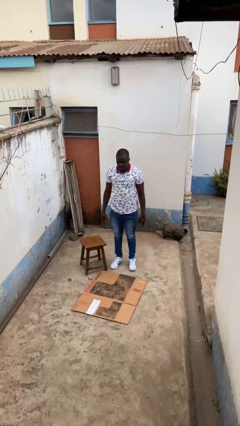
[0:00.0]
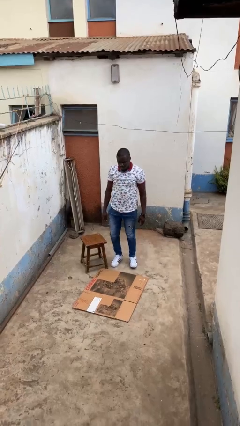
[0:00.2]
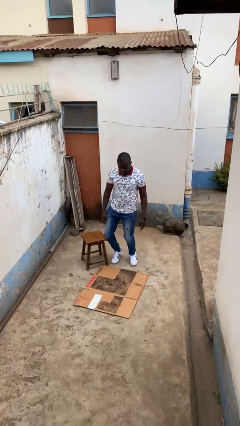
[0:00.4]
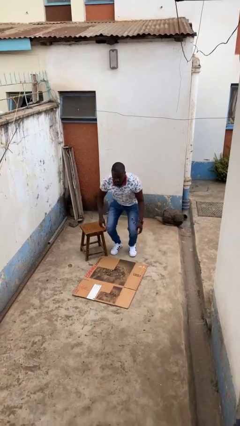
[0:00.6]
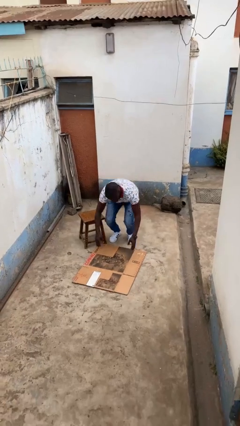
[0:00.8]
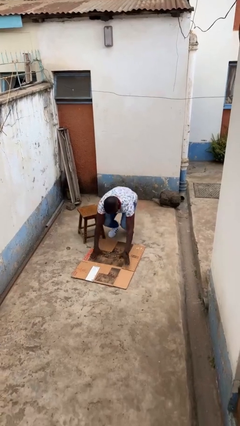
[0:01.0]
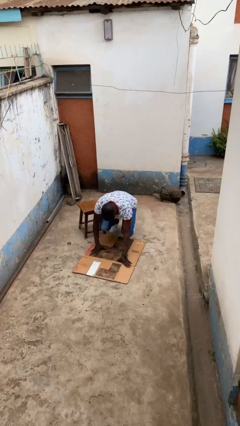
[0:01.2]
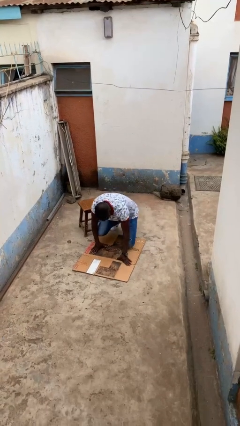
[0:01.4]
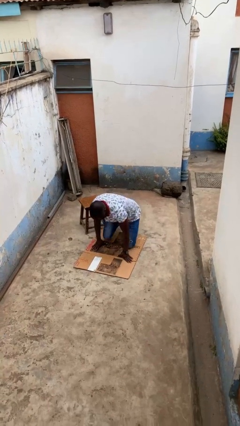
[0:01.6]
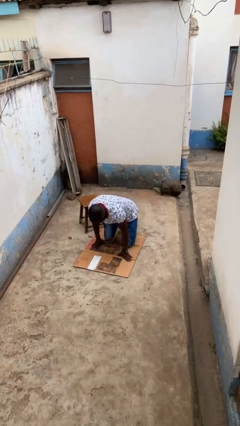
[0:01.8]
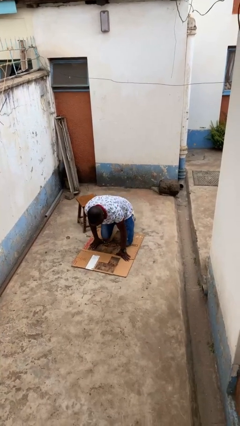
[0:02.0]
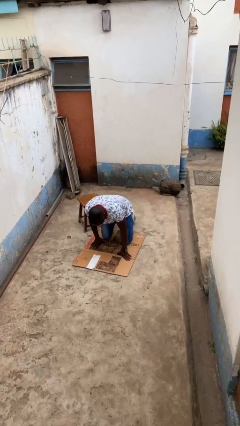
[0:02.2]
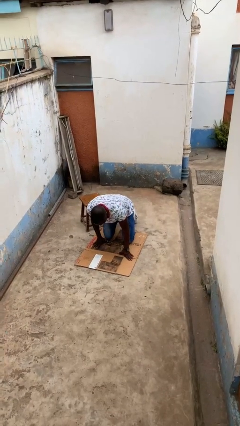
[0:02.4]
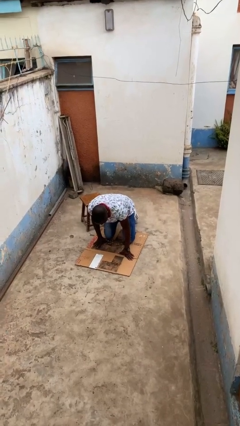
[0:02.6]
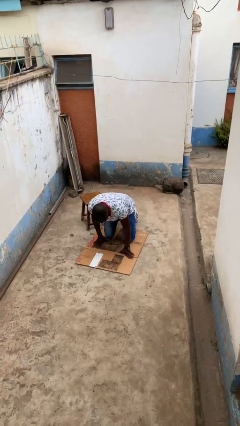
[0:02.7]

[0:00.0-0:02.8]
person trips on object on floor

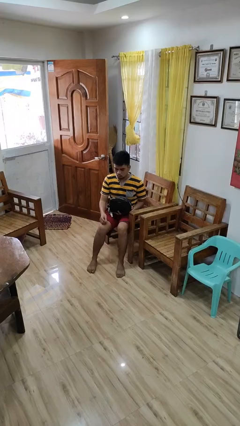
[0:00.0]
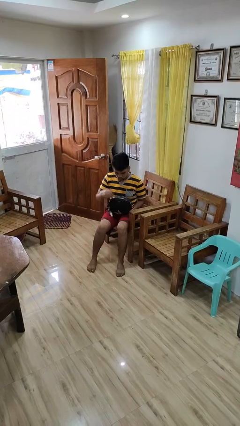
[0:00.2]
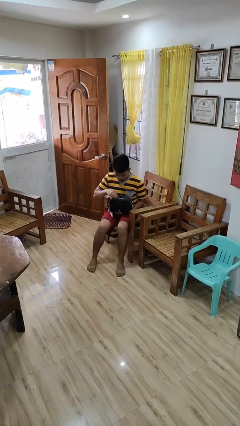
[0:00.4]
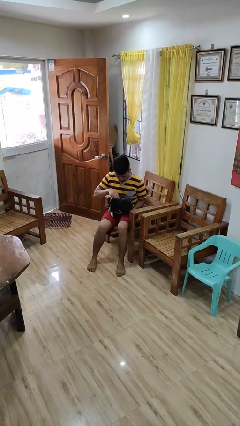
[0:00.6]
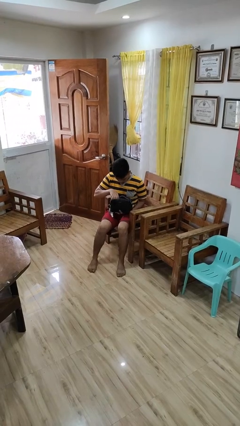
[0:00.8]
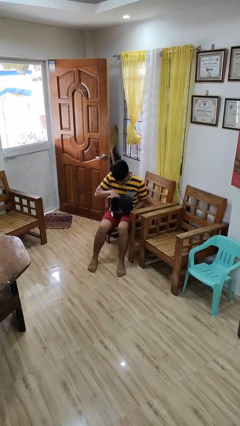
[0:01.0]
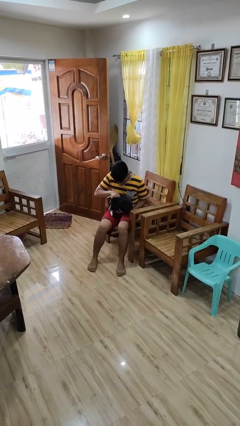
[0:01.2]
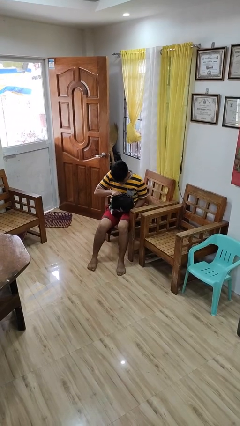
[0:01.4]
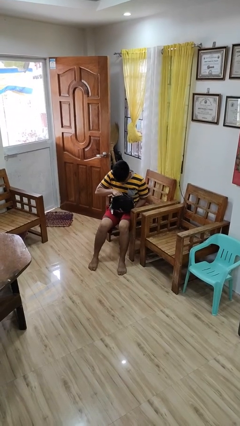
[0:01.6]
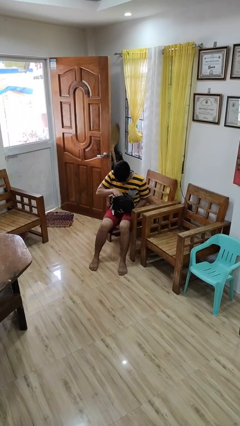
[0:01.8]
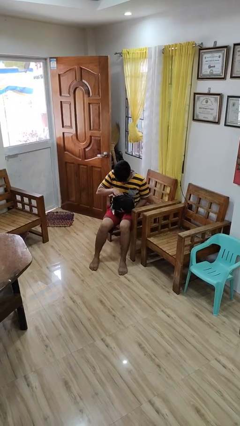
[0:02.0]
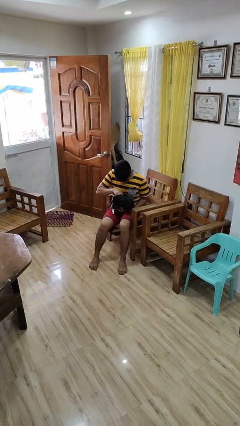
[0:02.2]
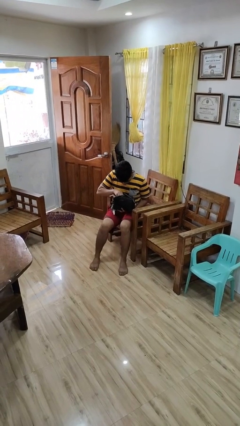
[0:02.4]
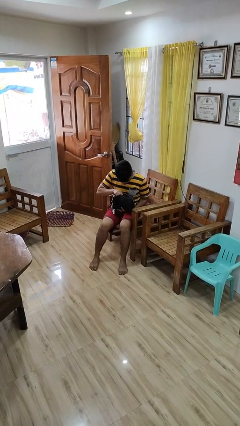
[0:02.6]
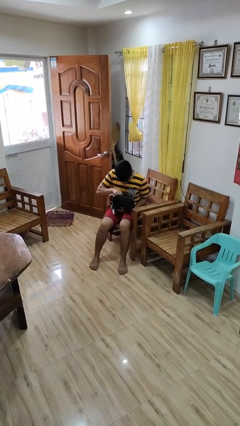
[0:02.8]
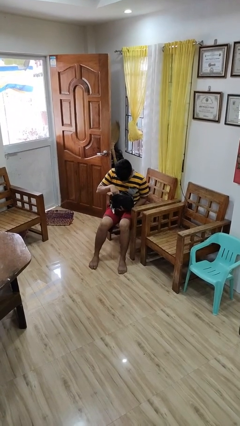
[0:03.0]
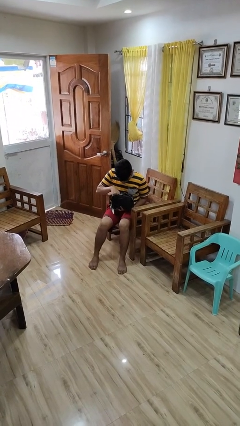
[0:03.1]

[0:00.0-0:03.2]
person searches in purse

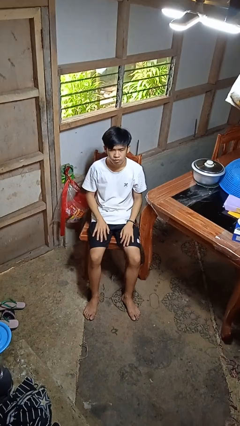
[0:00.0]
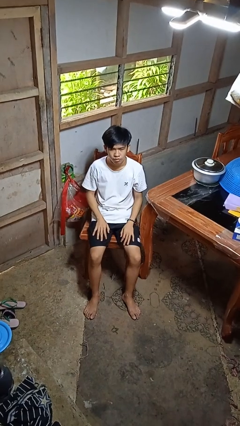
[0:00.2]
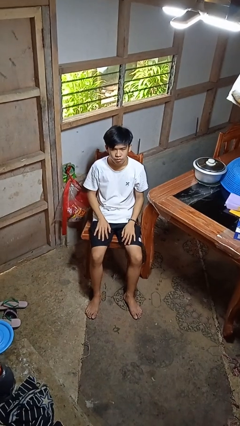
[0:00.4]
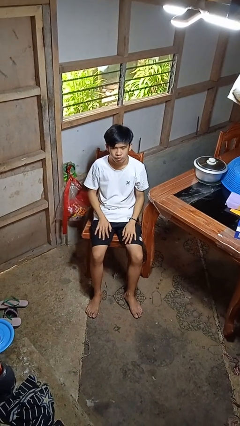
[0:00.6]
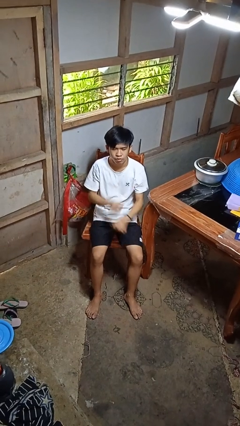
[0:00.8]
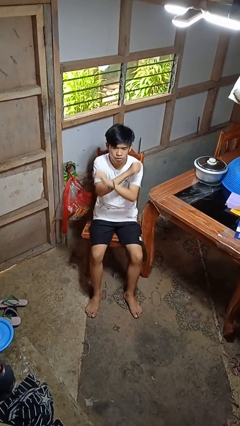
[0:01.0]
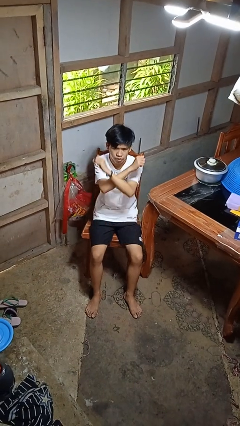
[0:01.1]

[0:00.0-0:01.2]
person gestures arms x

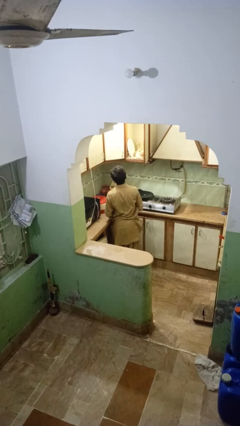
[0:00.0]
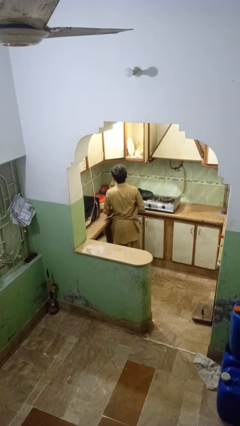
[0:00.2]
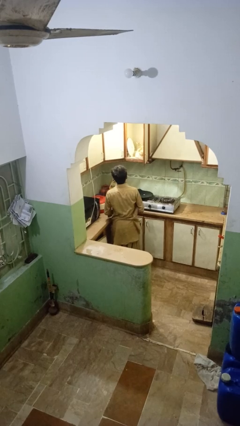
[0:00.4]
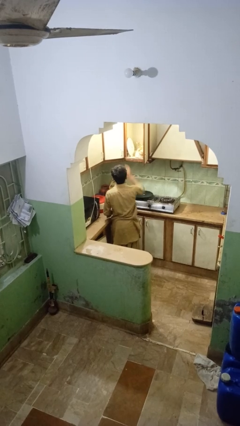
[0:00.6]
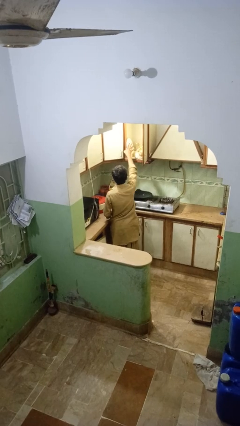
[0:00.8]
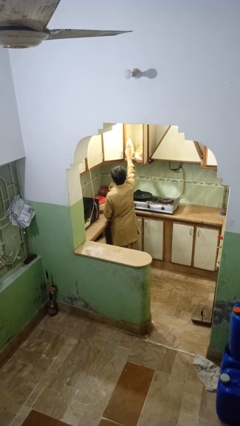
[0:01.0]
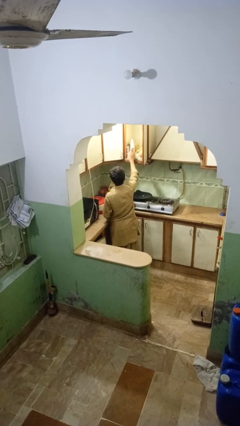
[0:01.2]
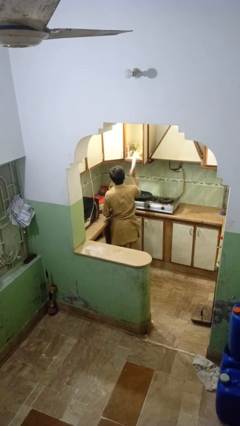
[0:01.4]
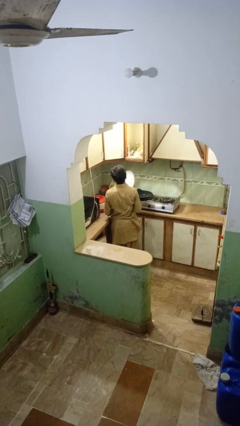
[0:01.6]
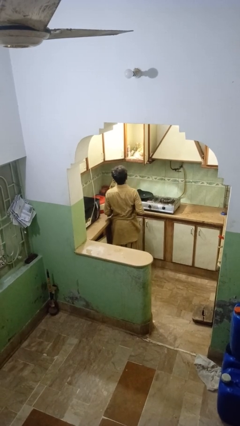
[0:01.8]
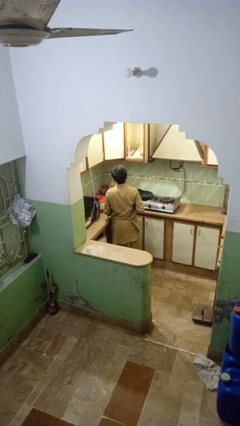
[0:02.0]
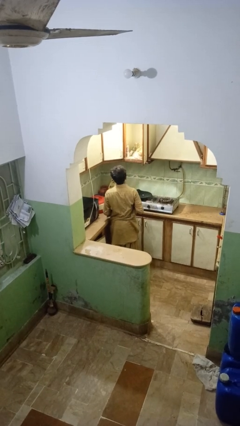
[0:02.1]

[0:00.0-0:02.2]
person takes object from cabinet

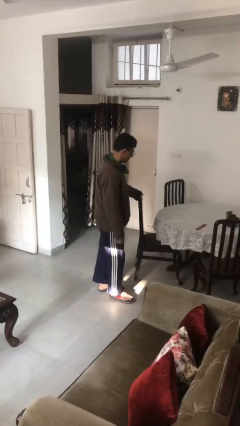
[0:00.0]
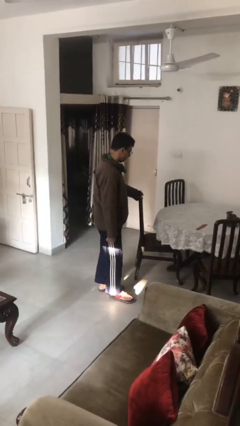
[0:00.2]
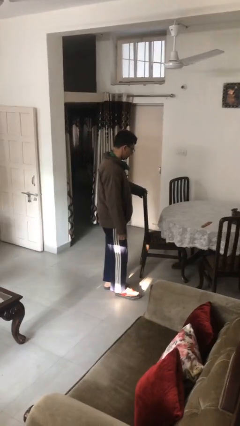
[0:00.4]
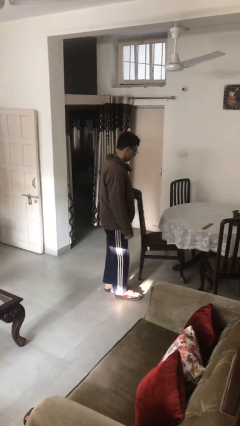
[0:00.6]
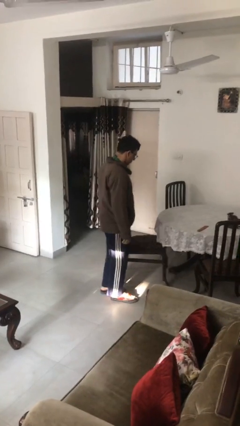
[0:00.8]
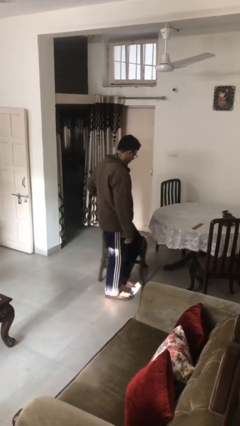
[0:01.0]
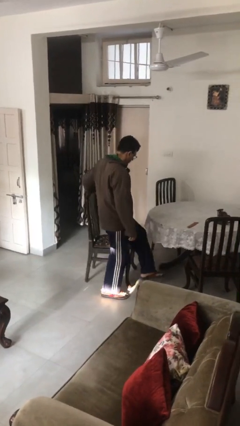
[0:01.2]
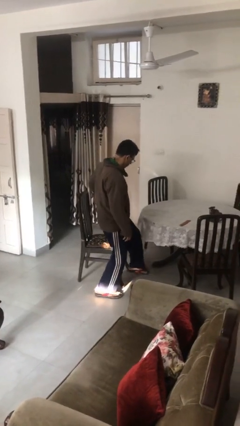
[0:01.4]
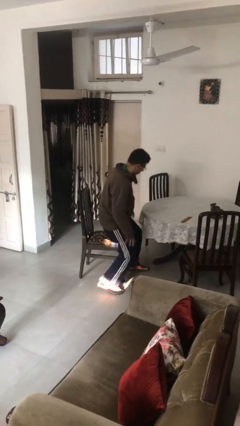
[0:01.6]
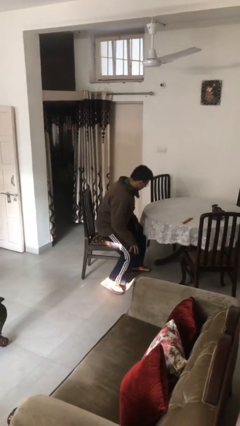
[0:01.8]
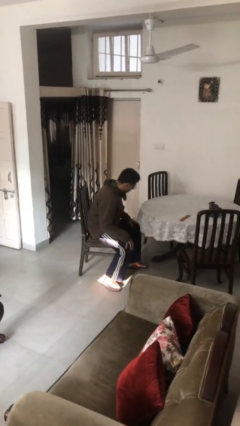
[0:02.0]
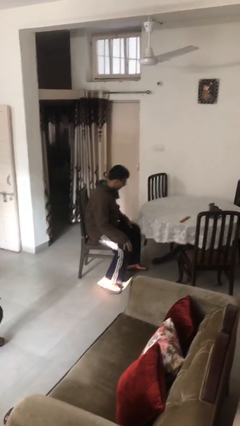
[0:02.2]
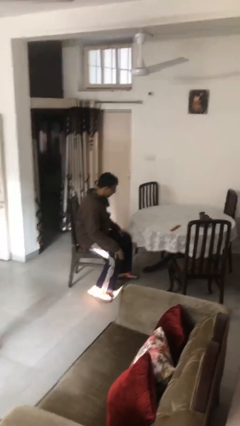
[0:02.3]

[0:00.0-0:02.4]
person sits down

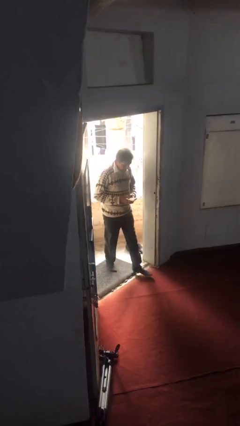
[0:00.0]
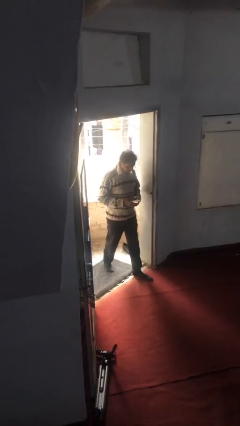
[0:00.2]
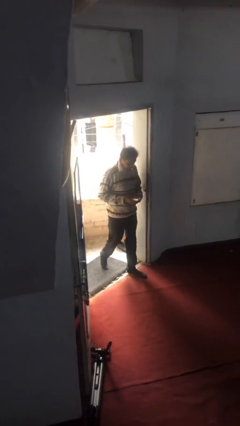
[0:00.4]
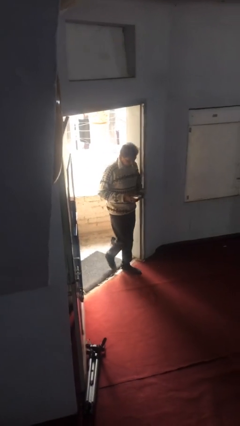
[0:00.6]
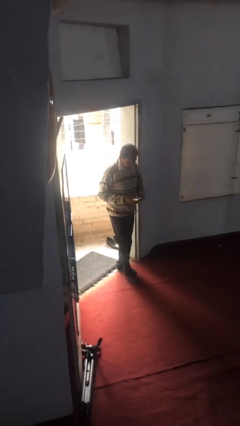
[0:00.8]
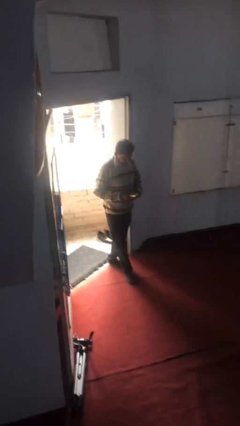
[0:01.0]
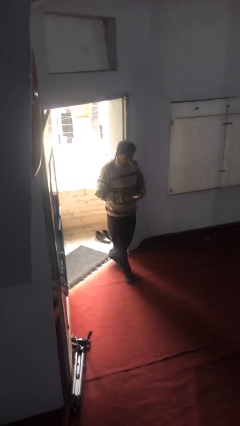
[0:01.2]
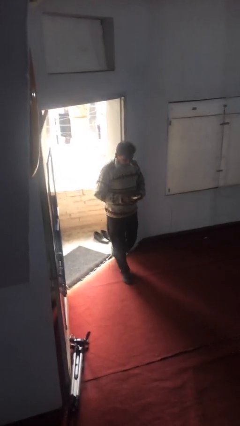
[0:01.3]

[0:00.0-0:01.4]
person enters scene through structure

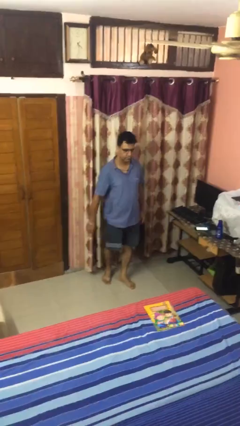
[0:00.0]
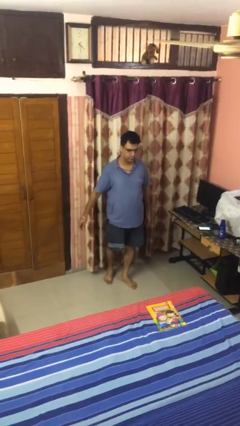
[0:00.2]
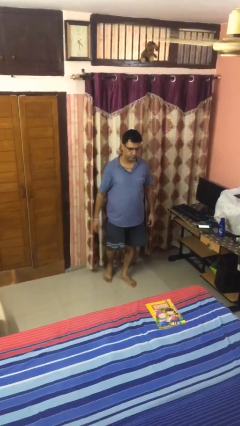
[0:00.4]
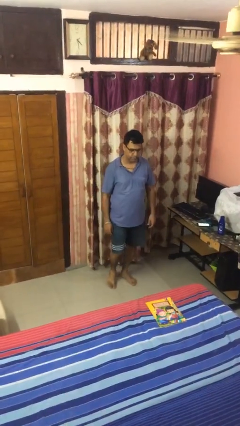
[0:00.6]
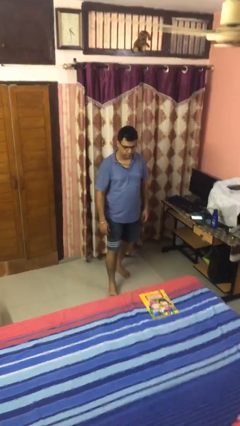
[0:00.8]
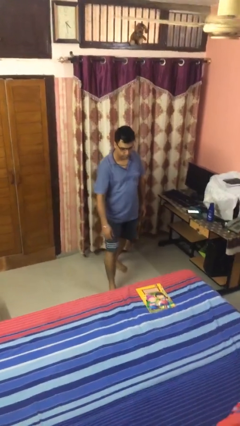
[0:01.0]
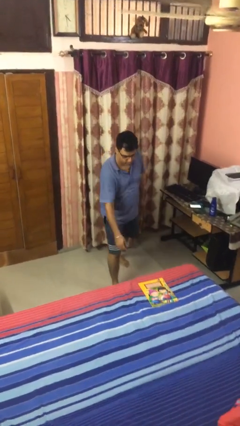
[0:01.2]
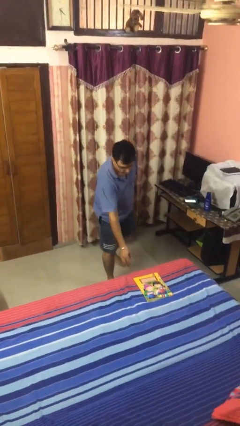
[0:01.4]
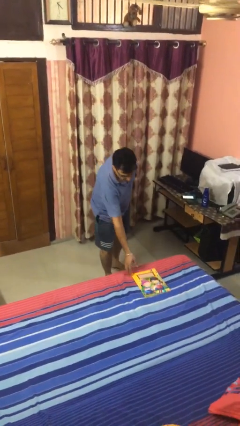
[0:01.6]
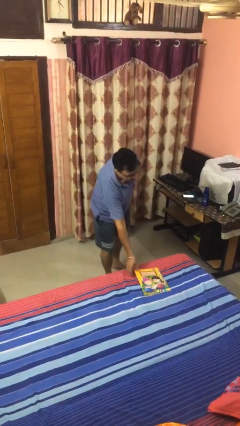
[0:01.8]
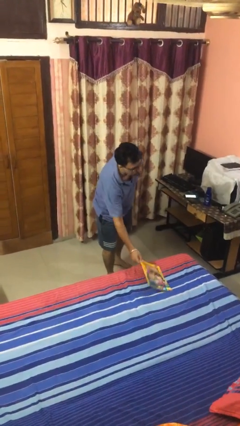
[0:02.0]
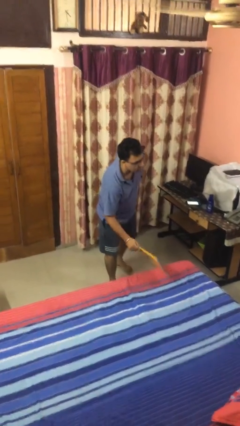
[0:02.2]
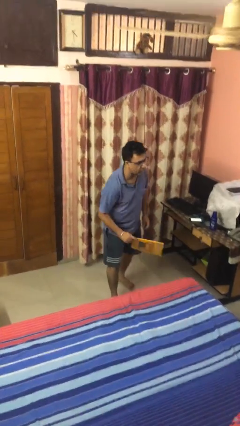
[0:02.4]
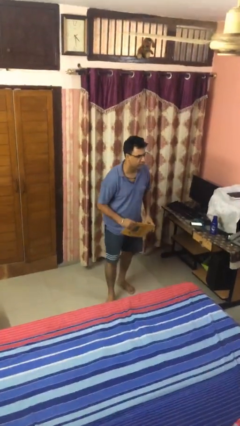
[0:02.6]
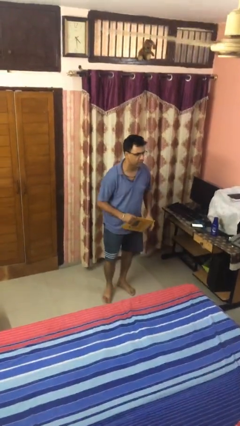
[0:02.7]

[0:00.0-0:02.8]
person picks up object from bed

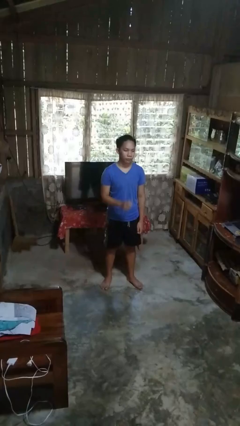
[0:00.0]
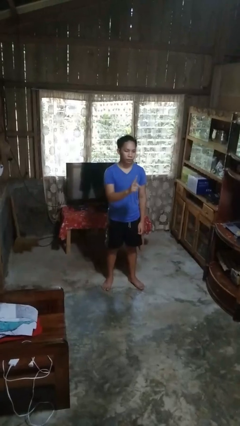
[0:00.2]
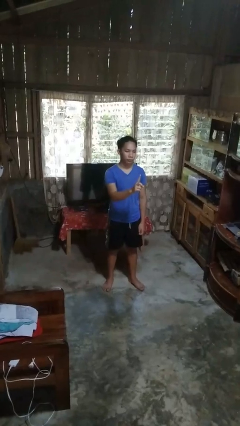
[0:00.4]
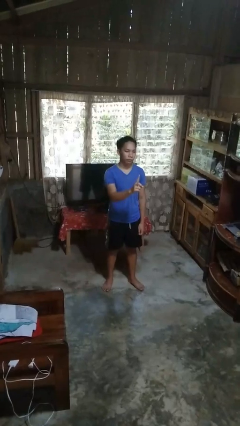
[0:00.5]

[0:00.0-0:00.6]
person gestures number one

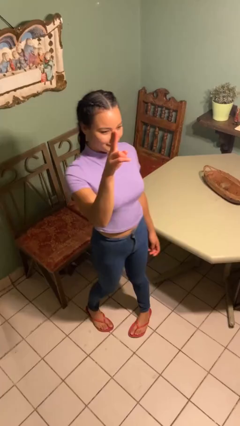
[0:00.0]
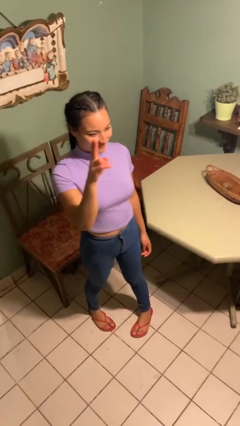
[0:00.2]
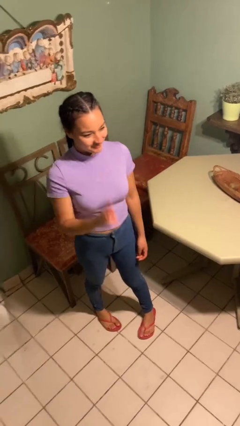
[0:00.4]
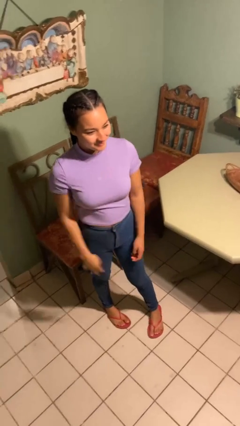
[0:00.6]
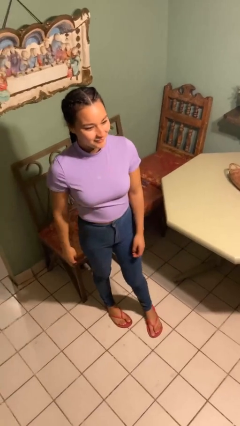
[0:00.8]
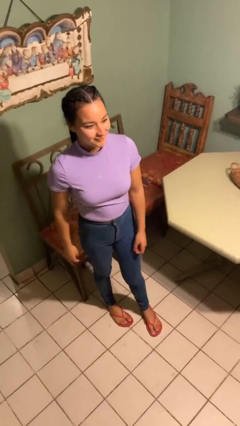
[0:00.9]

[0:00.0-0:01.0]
person salutes
